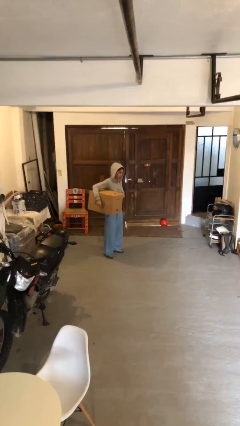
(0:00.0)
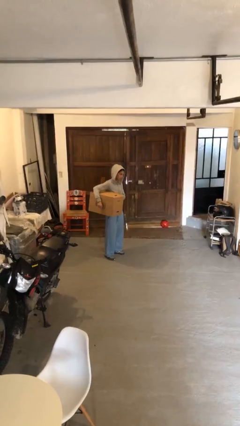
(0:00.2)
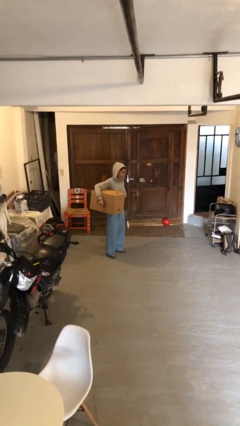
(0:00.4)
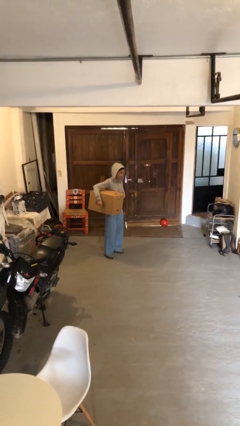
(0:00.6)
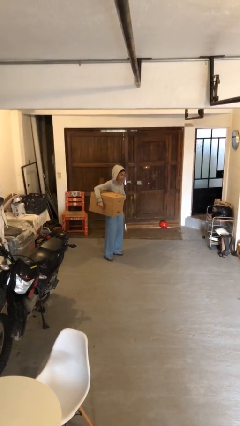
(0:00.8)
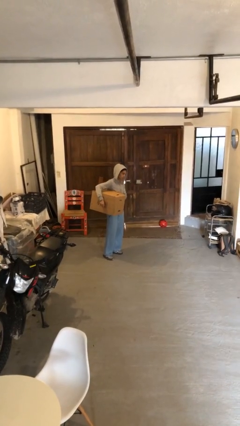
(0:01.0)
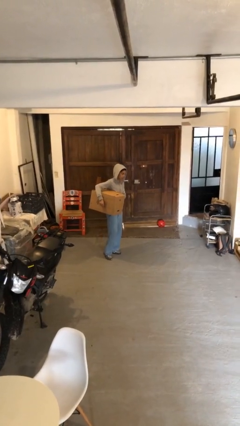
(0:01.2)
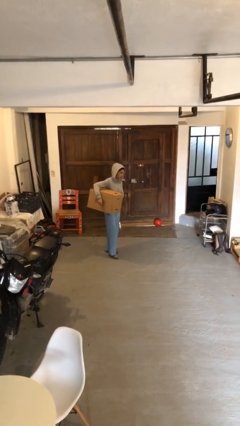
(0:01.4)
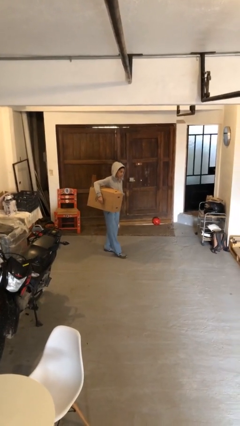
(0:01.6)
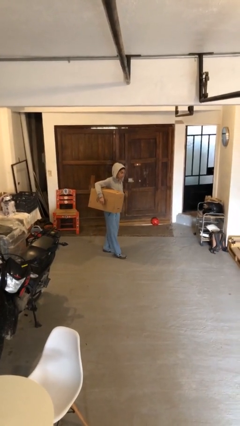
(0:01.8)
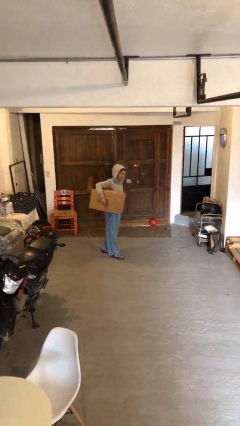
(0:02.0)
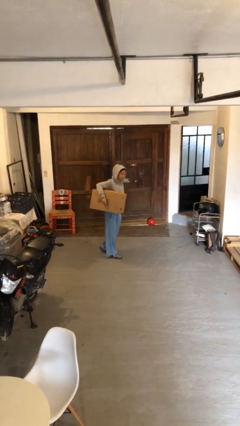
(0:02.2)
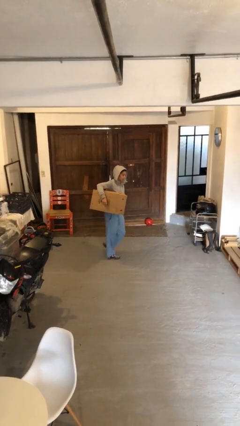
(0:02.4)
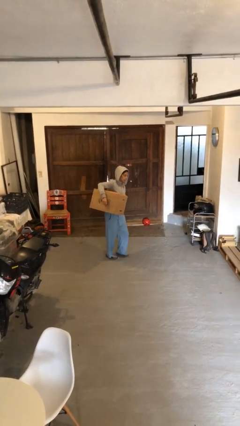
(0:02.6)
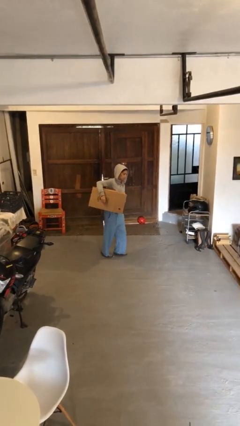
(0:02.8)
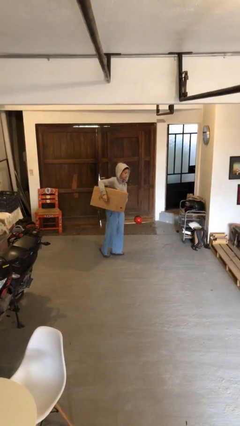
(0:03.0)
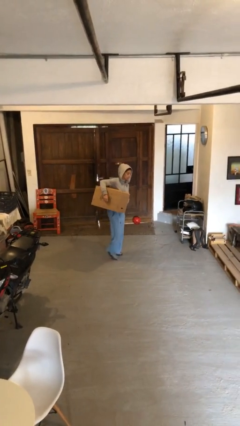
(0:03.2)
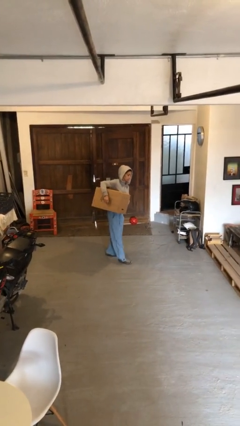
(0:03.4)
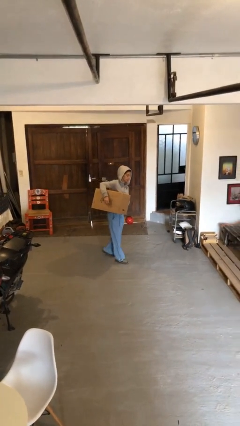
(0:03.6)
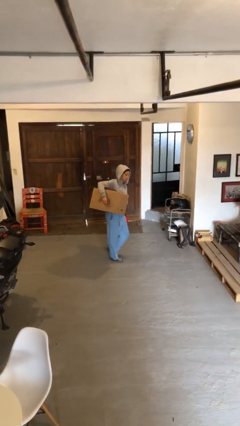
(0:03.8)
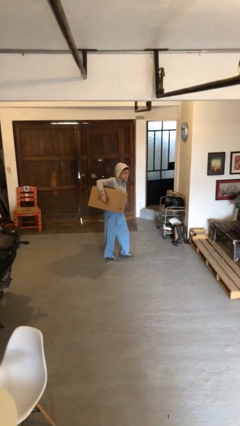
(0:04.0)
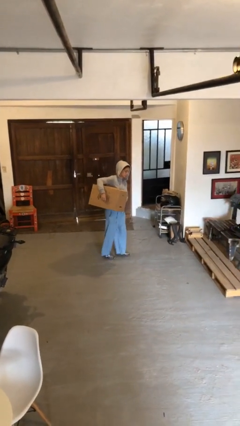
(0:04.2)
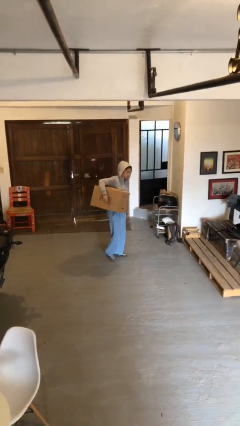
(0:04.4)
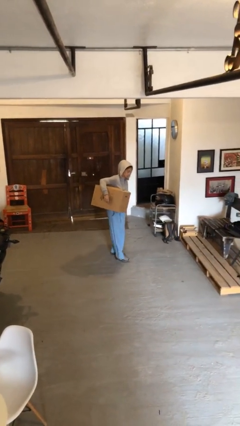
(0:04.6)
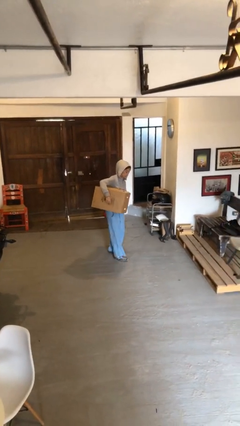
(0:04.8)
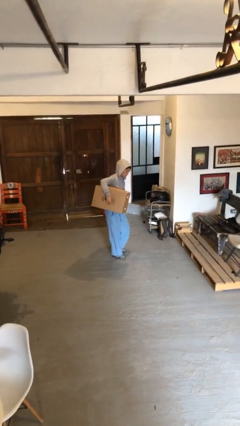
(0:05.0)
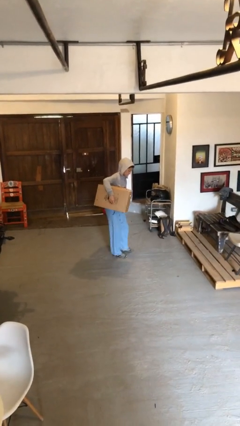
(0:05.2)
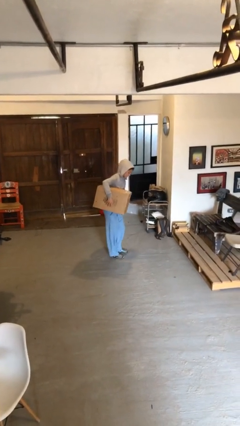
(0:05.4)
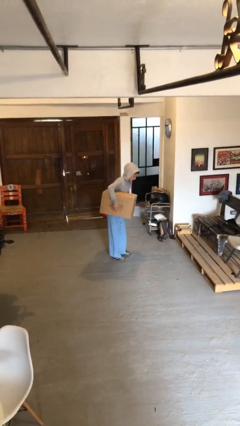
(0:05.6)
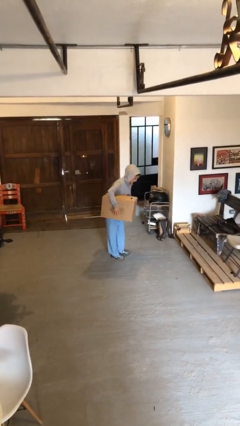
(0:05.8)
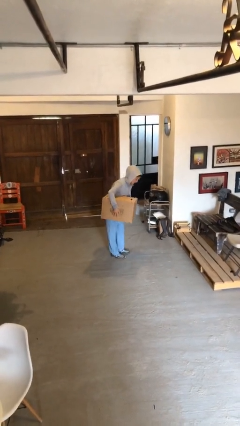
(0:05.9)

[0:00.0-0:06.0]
person carries heavy object

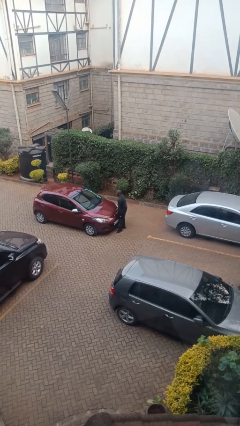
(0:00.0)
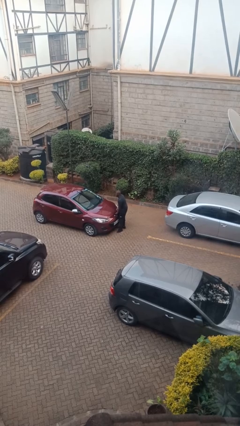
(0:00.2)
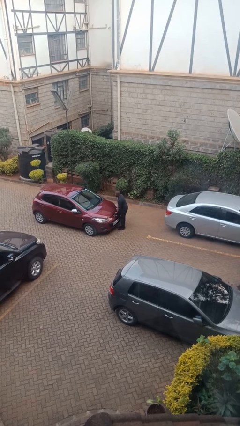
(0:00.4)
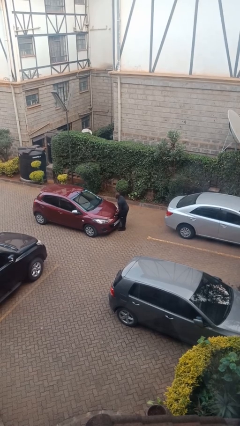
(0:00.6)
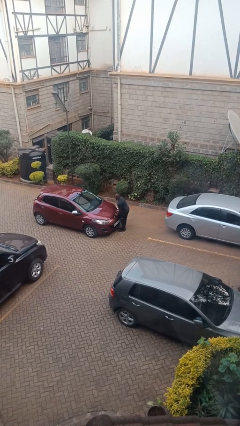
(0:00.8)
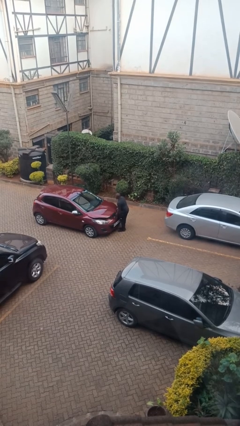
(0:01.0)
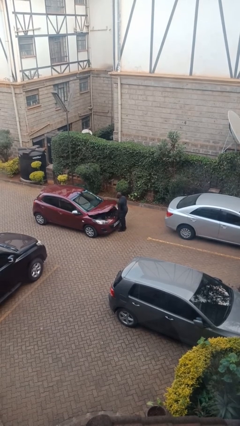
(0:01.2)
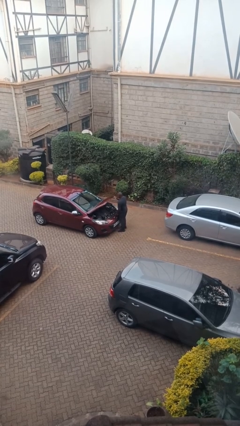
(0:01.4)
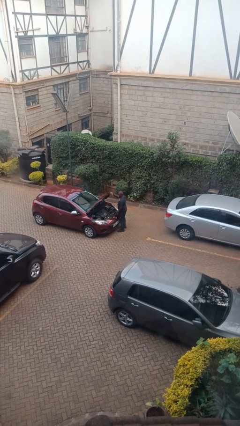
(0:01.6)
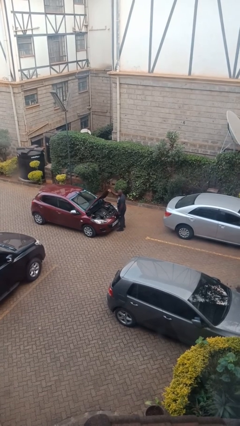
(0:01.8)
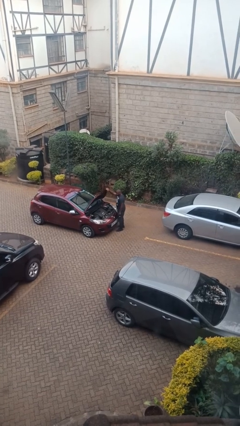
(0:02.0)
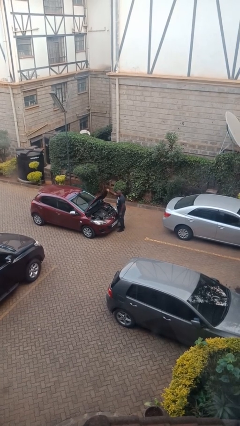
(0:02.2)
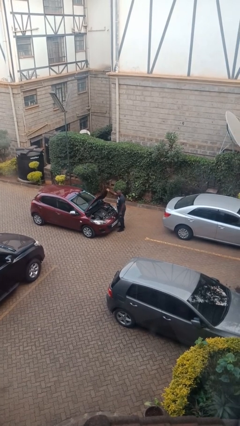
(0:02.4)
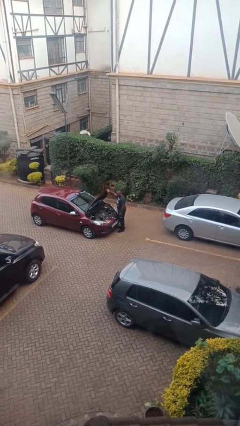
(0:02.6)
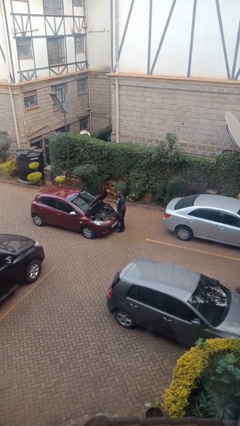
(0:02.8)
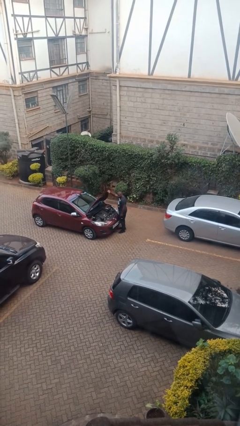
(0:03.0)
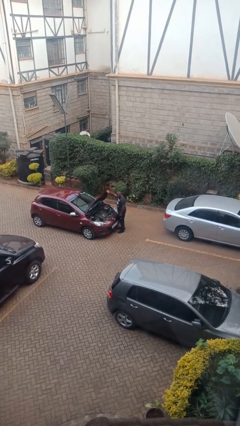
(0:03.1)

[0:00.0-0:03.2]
person opens car hood

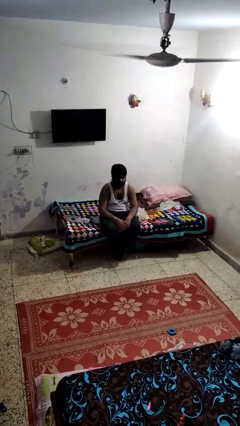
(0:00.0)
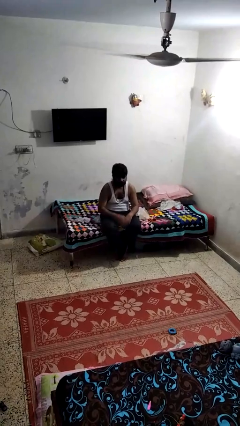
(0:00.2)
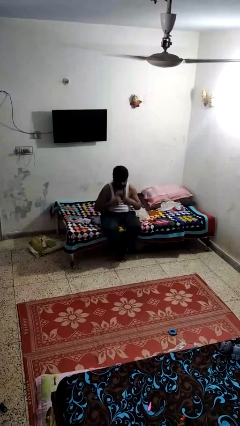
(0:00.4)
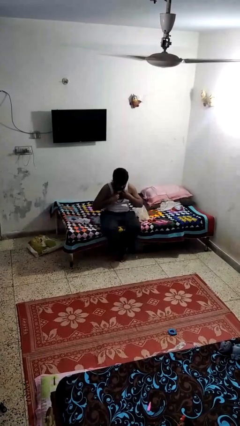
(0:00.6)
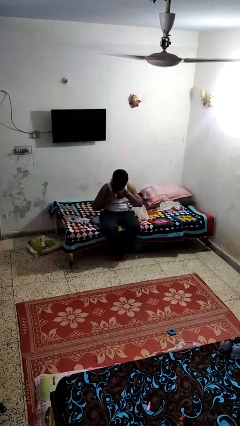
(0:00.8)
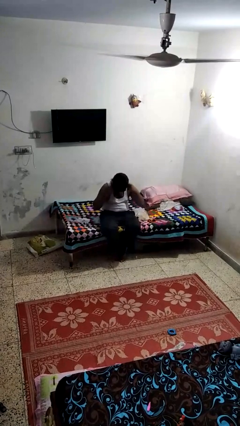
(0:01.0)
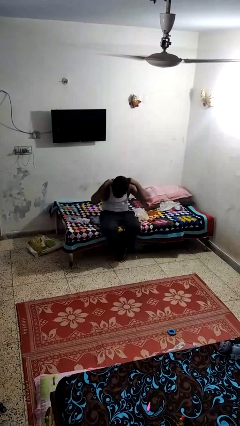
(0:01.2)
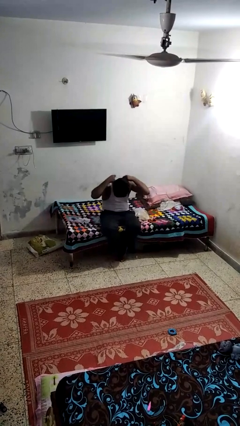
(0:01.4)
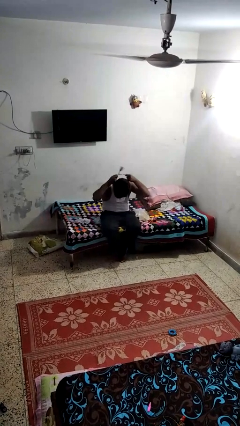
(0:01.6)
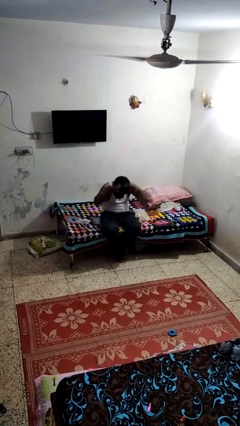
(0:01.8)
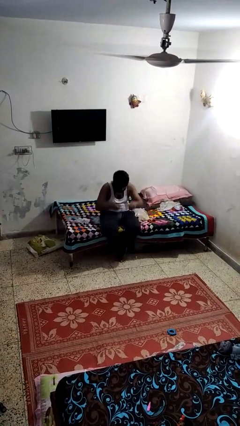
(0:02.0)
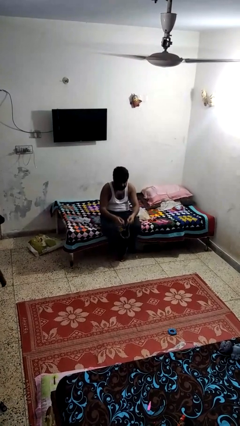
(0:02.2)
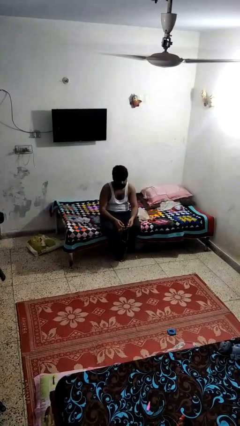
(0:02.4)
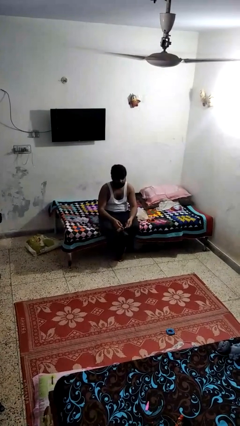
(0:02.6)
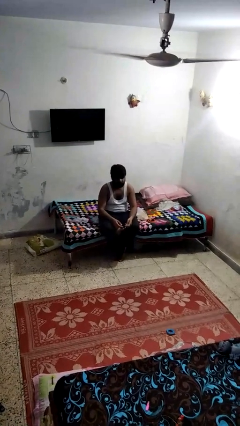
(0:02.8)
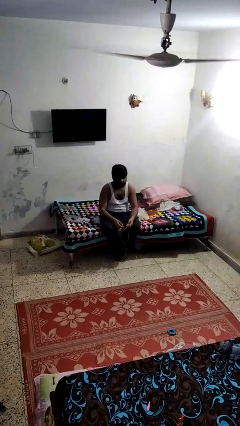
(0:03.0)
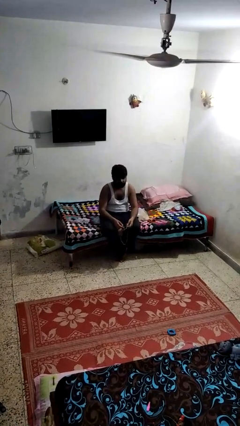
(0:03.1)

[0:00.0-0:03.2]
person takes off necklace

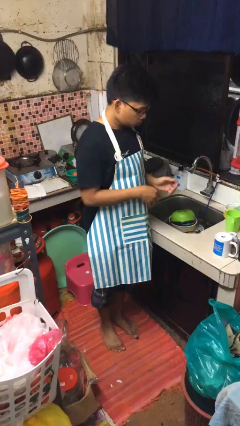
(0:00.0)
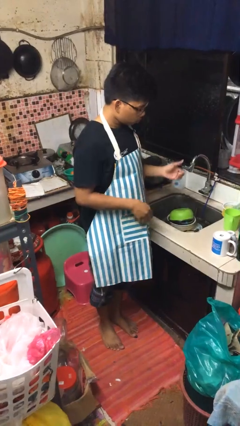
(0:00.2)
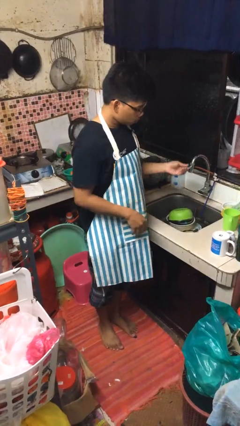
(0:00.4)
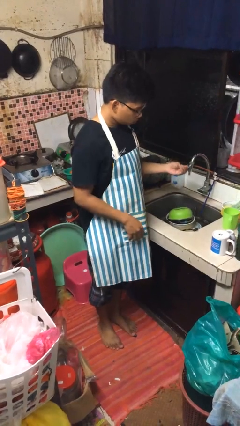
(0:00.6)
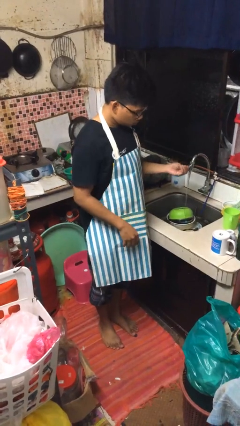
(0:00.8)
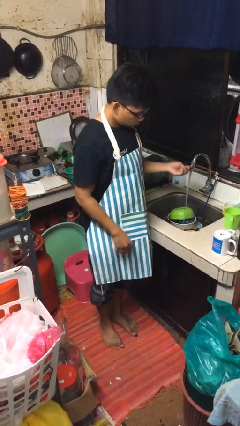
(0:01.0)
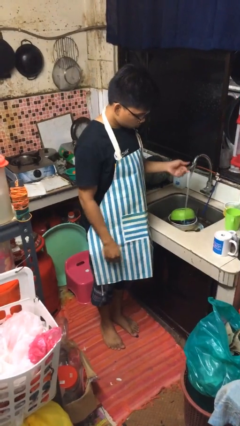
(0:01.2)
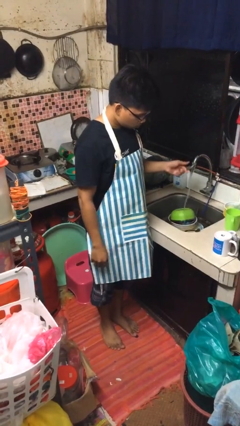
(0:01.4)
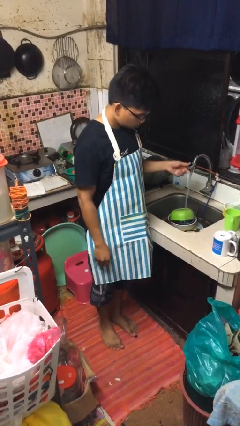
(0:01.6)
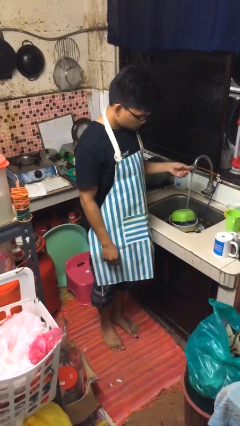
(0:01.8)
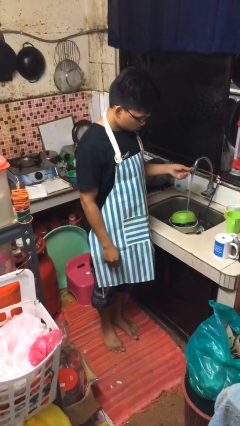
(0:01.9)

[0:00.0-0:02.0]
person turns on faucet

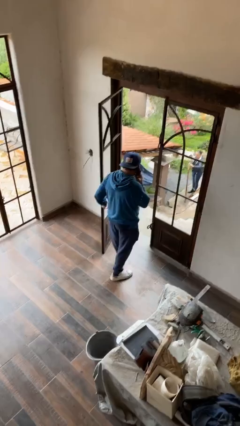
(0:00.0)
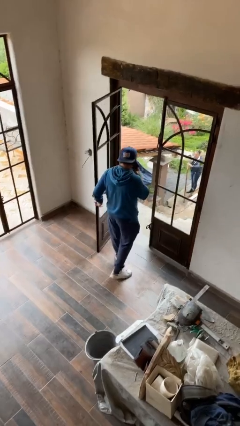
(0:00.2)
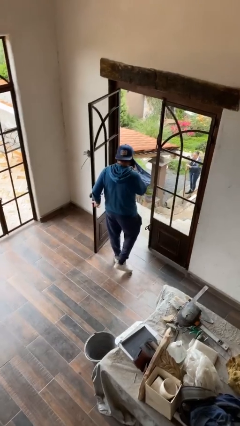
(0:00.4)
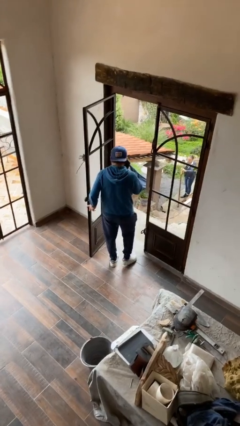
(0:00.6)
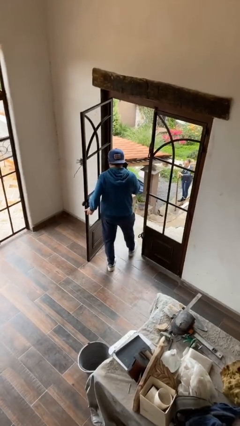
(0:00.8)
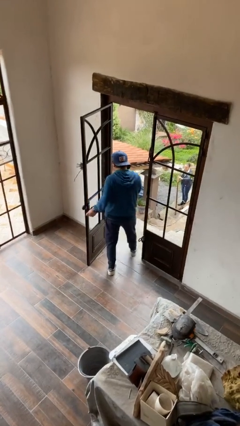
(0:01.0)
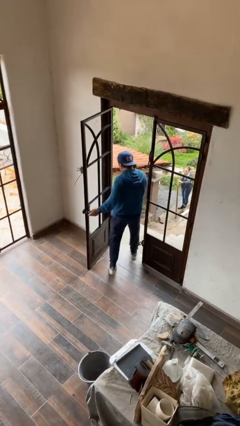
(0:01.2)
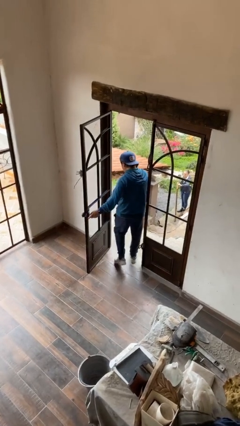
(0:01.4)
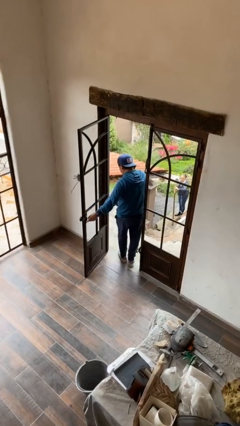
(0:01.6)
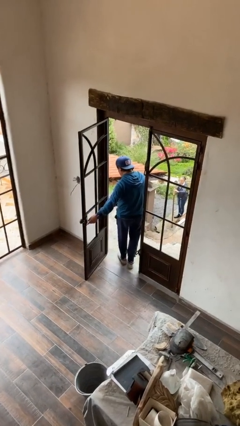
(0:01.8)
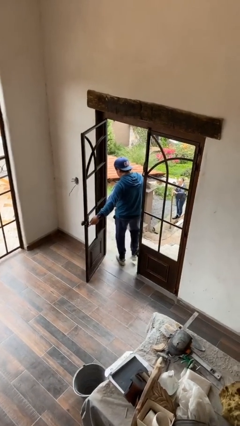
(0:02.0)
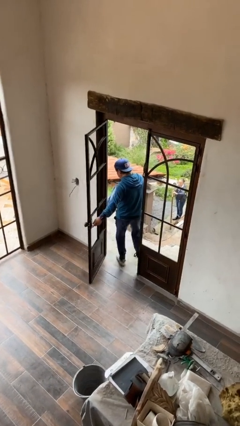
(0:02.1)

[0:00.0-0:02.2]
person exits scene through structure

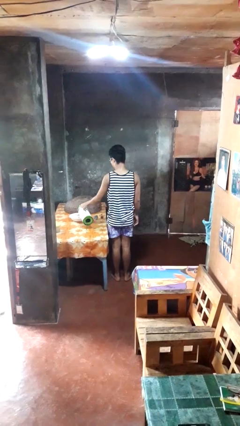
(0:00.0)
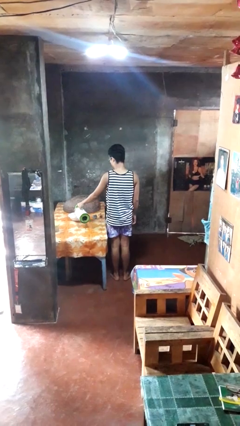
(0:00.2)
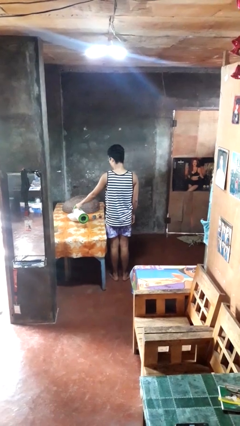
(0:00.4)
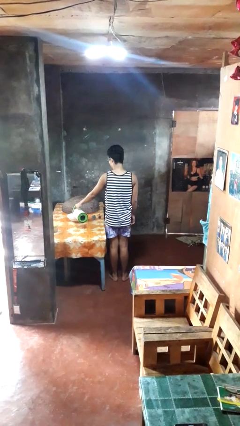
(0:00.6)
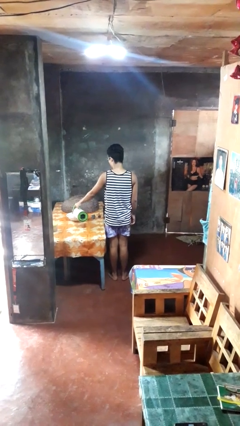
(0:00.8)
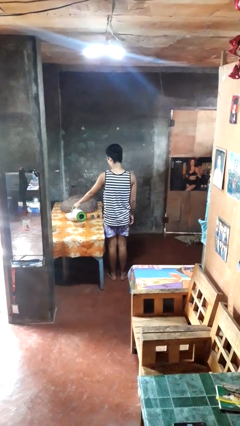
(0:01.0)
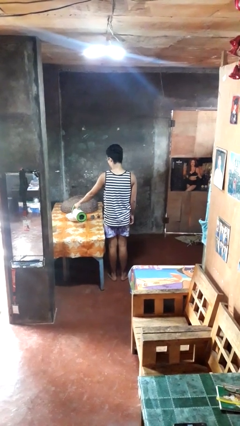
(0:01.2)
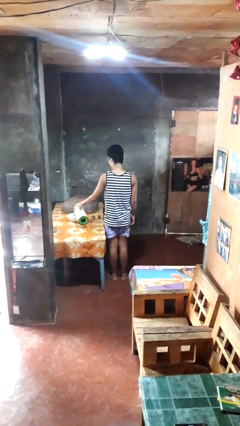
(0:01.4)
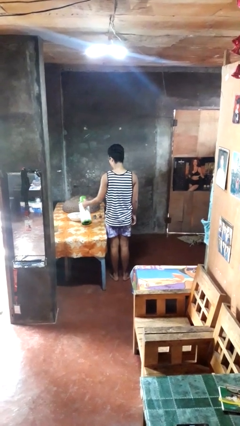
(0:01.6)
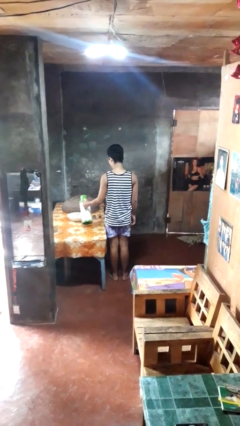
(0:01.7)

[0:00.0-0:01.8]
person pours into bowl
